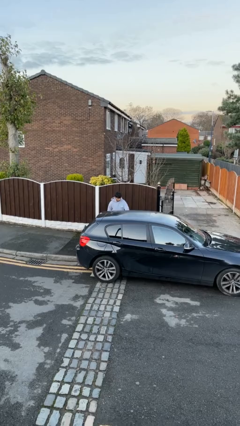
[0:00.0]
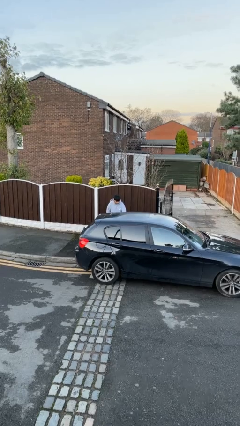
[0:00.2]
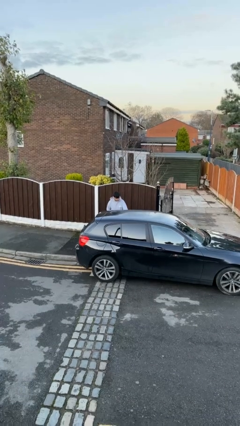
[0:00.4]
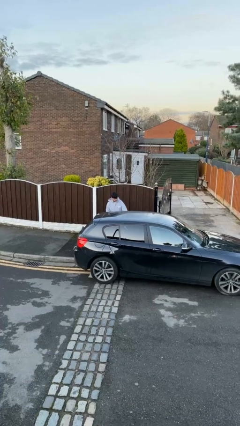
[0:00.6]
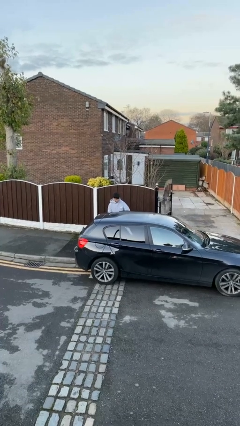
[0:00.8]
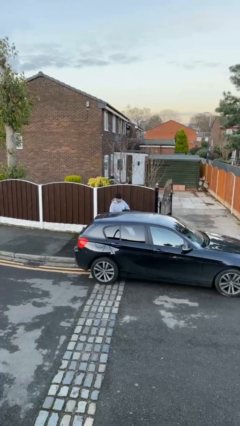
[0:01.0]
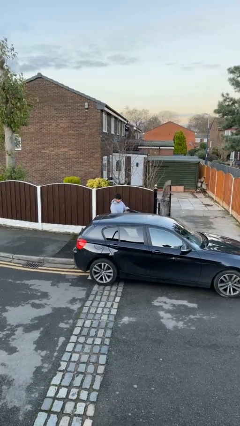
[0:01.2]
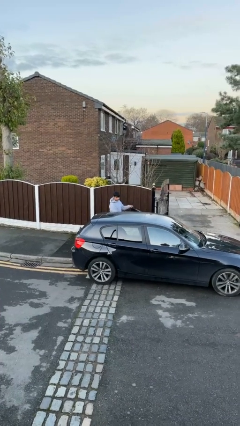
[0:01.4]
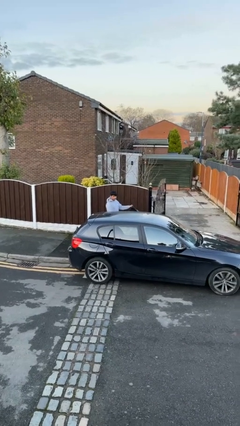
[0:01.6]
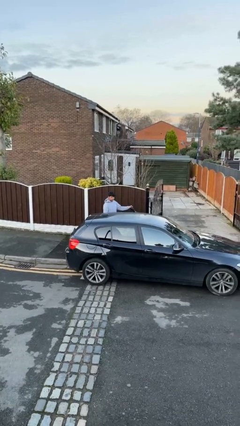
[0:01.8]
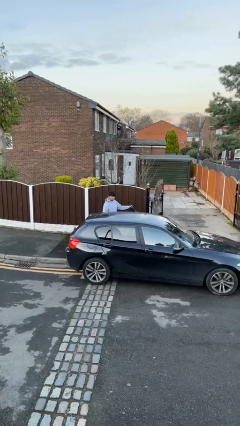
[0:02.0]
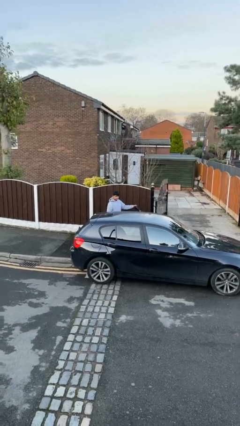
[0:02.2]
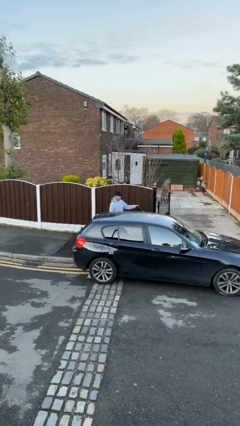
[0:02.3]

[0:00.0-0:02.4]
person opens car door

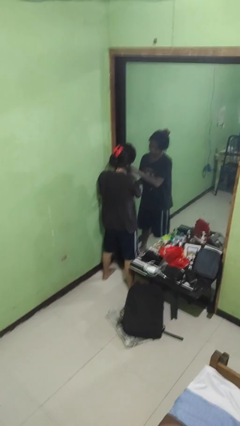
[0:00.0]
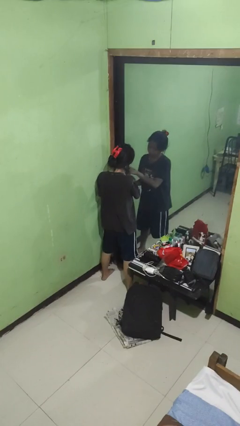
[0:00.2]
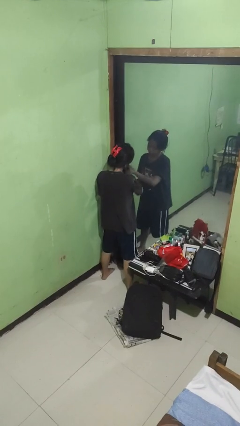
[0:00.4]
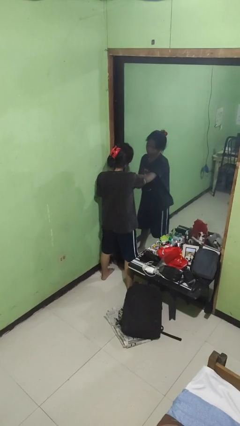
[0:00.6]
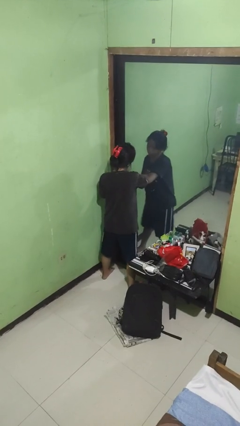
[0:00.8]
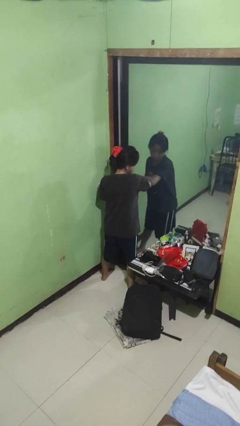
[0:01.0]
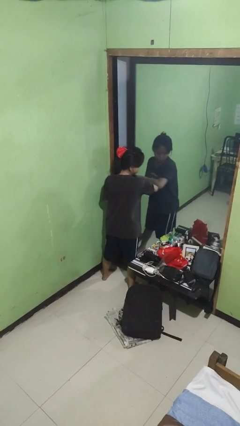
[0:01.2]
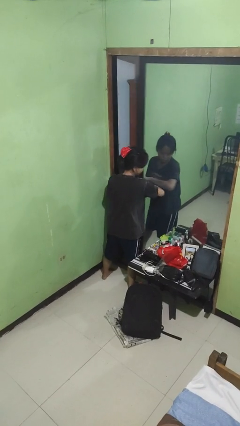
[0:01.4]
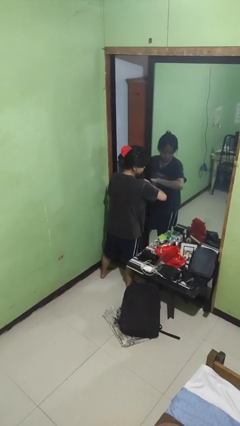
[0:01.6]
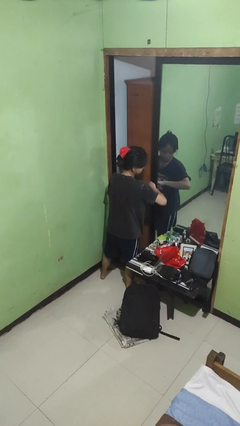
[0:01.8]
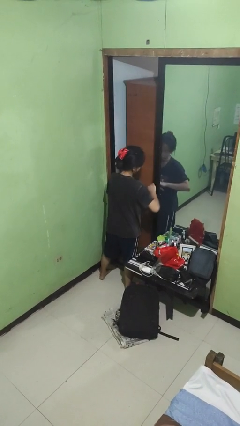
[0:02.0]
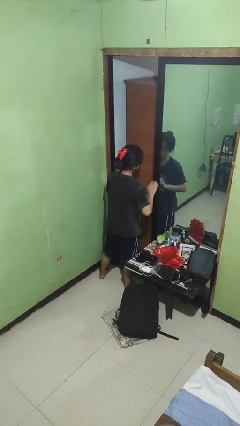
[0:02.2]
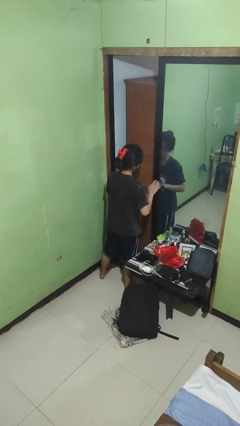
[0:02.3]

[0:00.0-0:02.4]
person opens sliding door

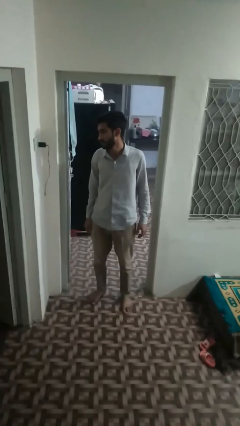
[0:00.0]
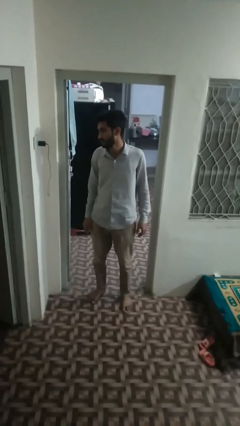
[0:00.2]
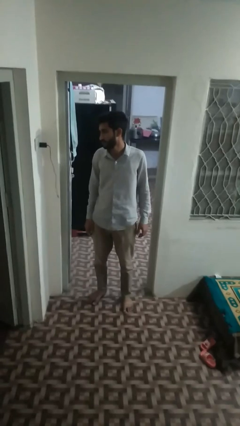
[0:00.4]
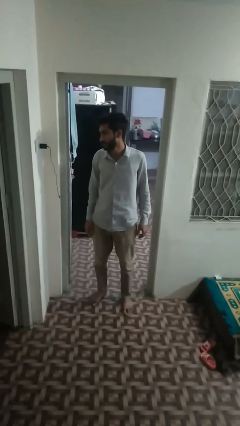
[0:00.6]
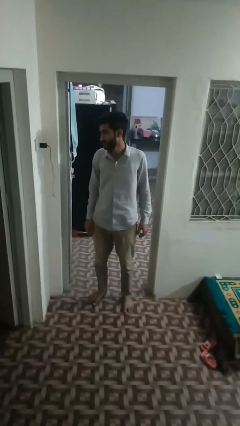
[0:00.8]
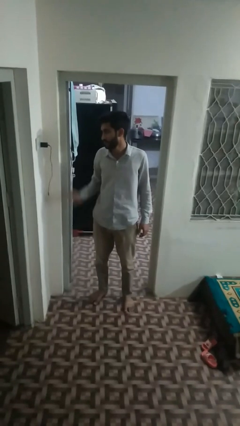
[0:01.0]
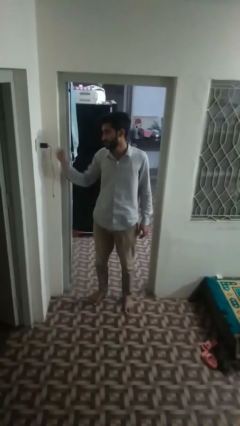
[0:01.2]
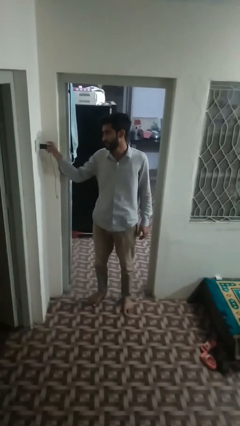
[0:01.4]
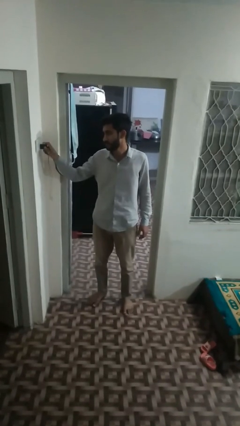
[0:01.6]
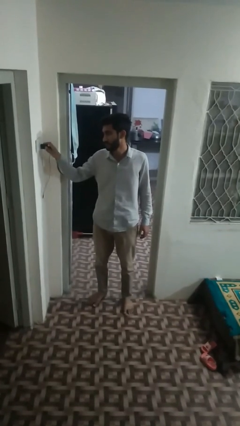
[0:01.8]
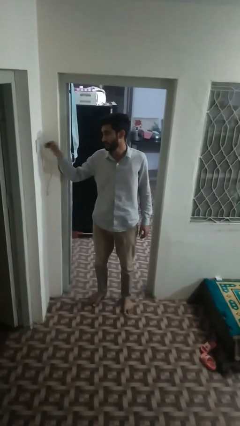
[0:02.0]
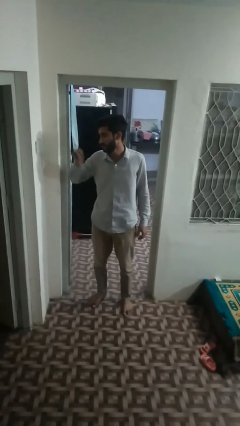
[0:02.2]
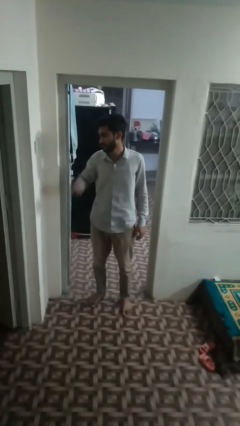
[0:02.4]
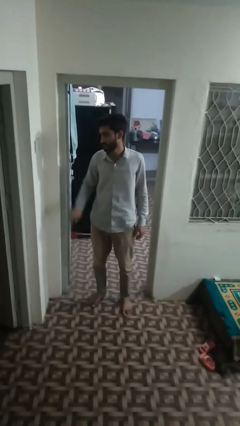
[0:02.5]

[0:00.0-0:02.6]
person unplugs from electrical socket

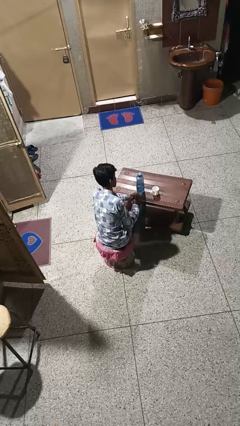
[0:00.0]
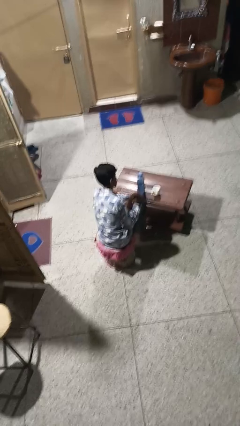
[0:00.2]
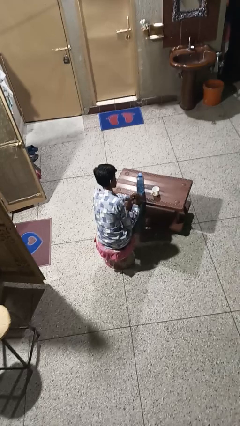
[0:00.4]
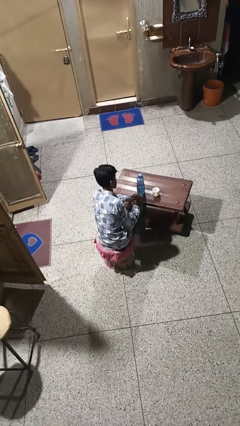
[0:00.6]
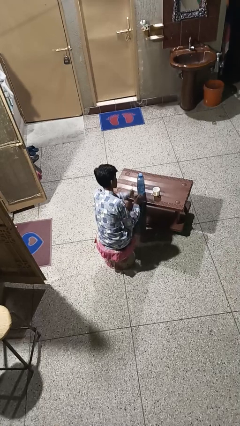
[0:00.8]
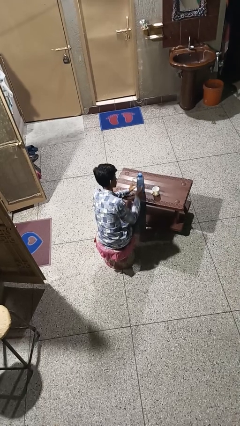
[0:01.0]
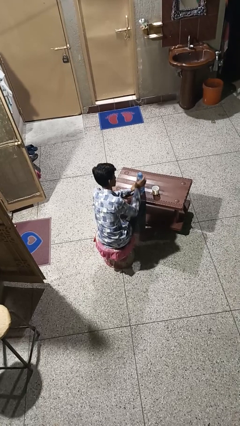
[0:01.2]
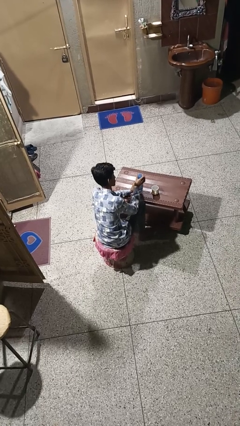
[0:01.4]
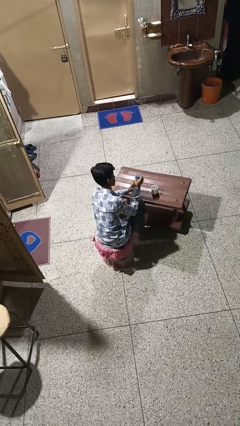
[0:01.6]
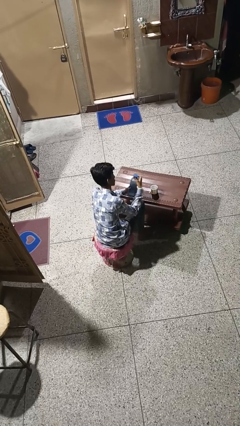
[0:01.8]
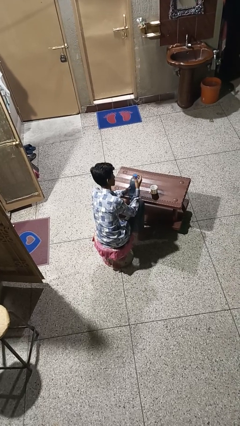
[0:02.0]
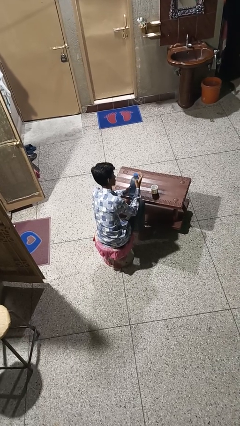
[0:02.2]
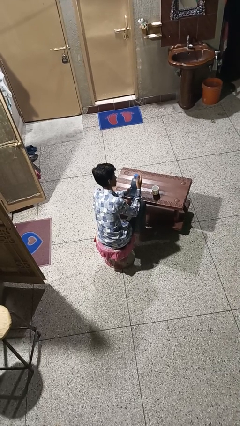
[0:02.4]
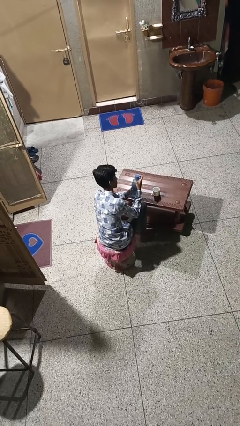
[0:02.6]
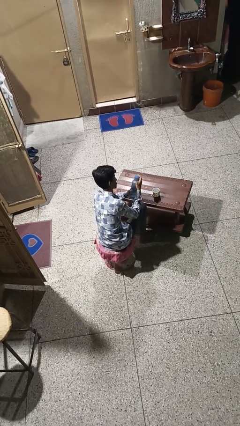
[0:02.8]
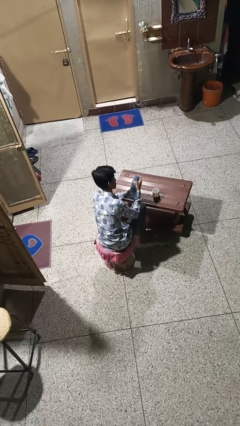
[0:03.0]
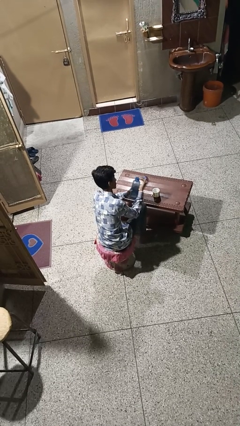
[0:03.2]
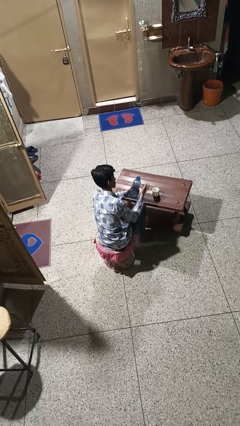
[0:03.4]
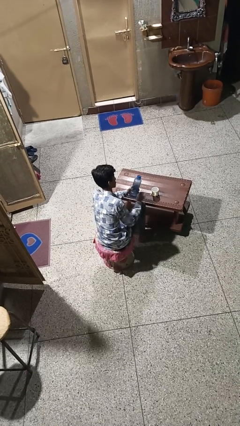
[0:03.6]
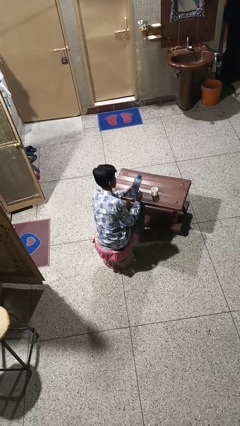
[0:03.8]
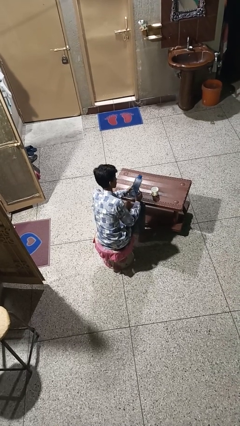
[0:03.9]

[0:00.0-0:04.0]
person unscrews lid from bottle

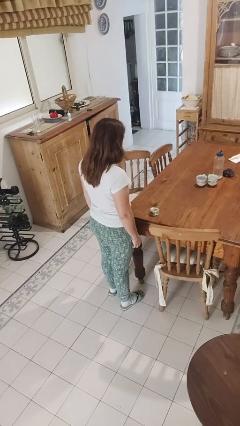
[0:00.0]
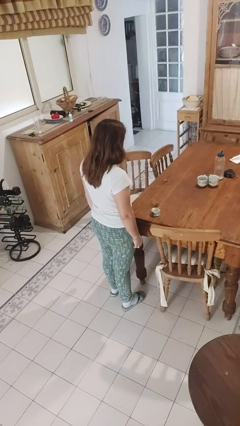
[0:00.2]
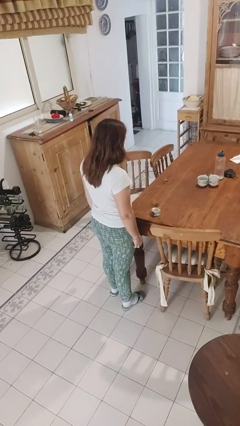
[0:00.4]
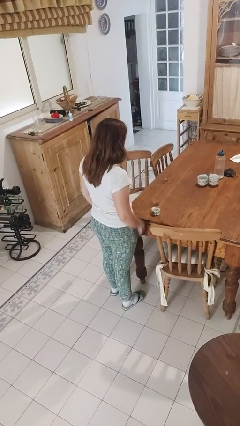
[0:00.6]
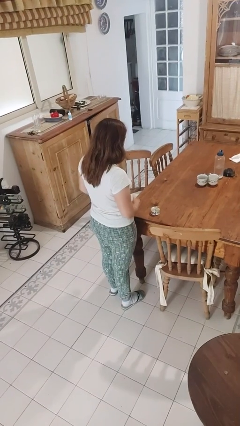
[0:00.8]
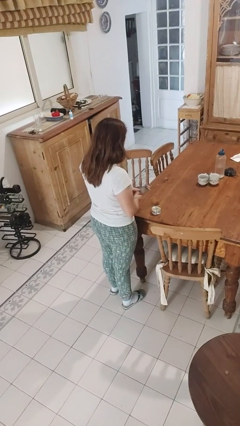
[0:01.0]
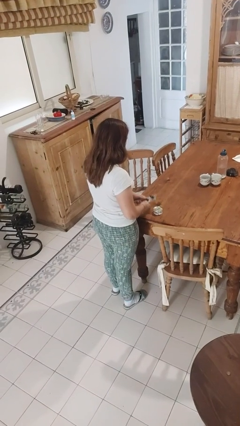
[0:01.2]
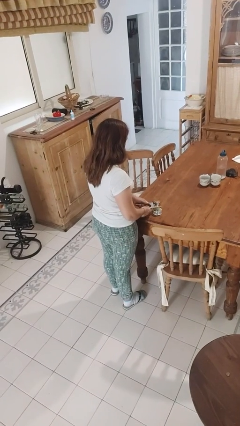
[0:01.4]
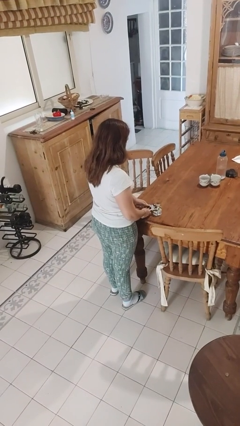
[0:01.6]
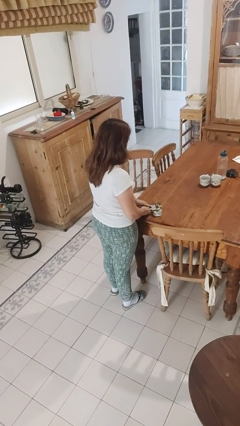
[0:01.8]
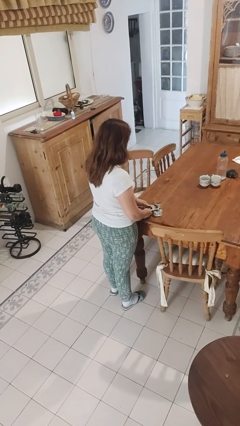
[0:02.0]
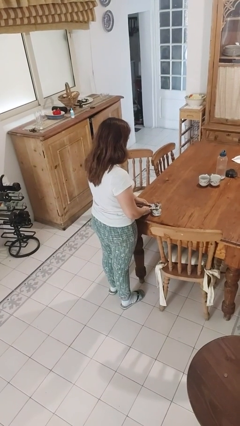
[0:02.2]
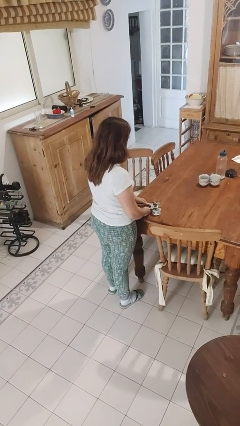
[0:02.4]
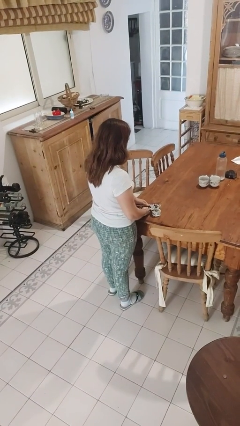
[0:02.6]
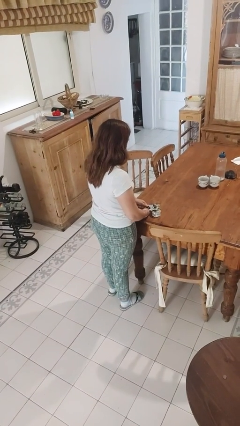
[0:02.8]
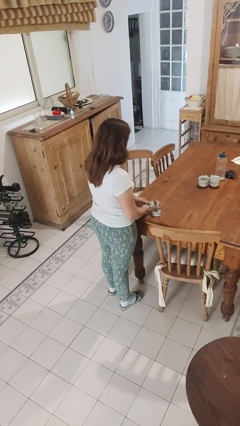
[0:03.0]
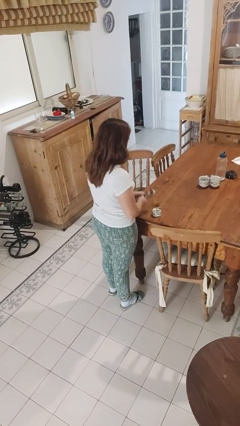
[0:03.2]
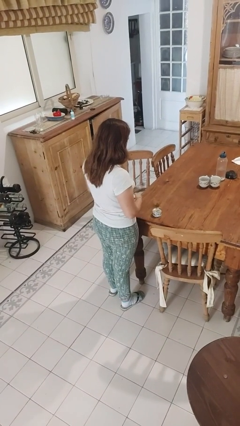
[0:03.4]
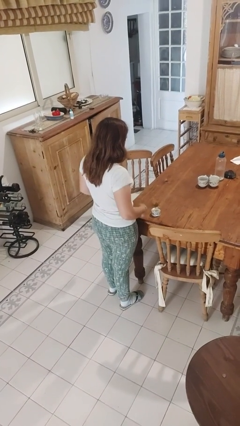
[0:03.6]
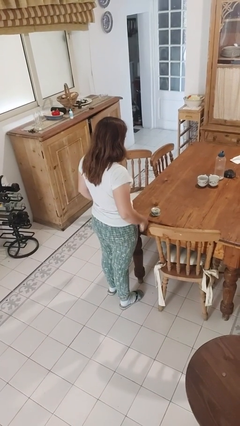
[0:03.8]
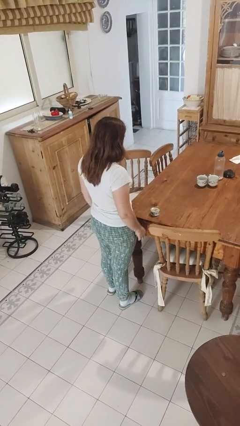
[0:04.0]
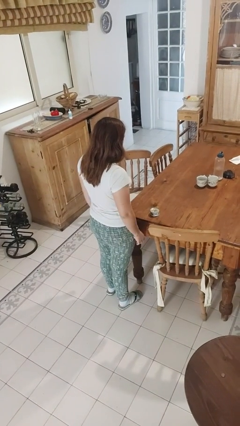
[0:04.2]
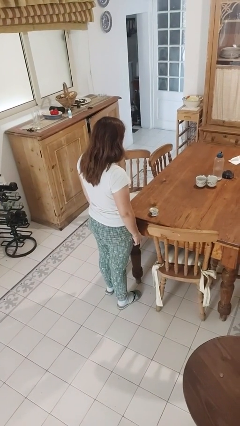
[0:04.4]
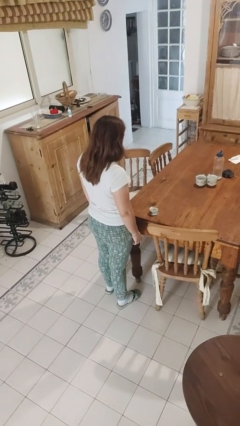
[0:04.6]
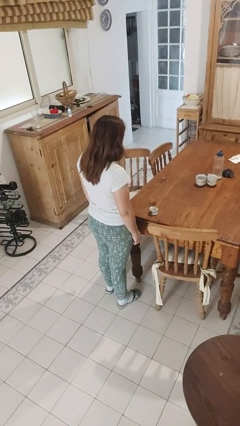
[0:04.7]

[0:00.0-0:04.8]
person opens can with can opener

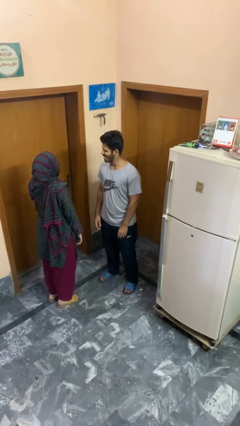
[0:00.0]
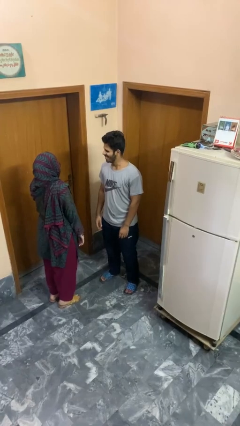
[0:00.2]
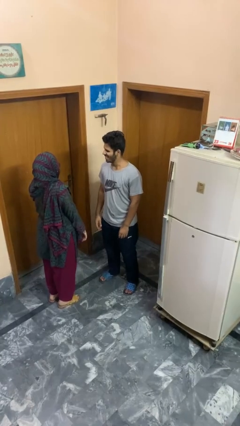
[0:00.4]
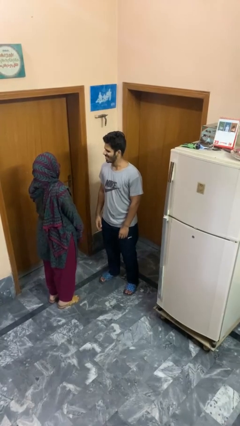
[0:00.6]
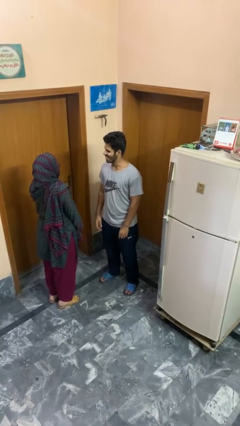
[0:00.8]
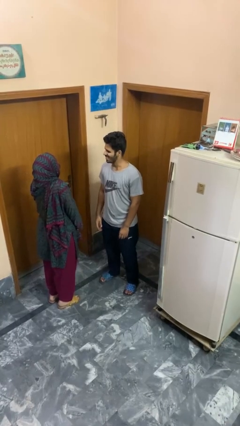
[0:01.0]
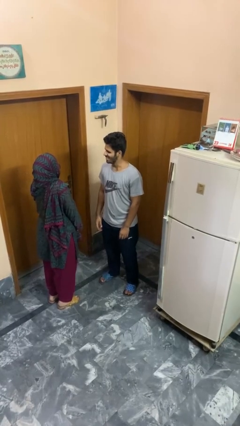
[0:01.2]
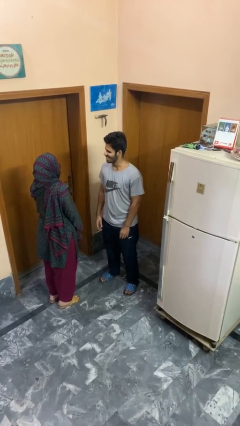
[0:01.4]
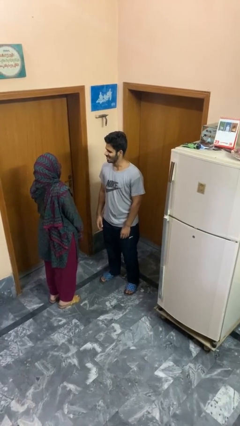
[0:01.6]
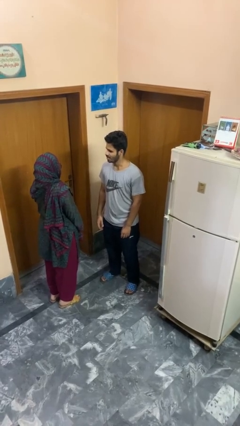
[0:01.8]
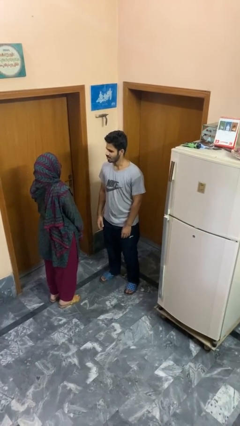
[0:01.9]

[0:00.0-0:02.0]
person laughs with person
